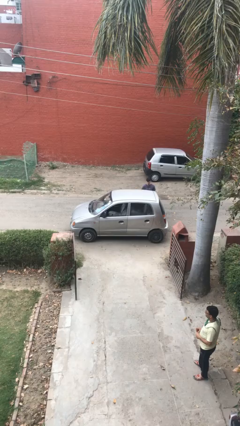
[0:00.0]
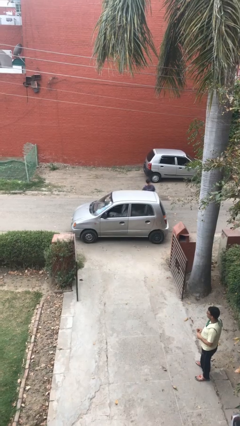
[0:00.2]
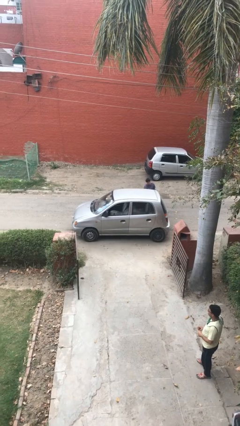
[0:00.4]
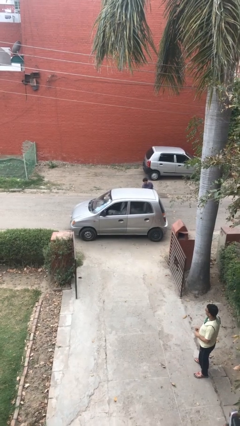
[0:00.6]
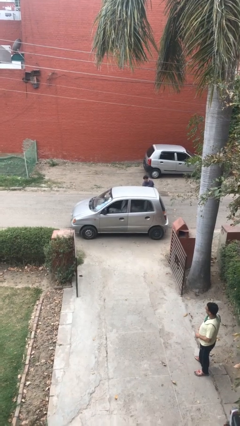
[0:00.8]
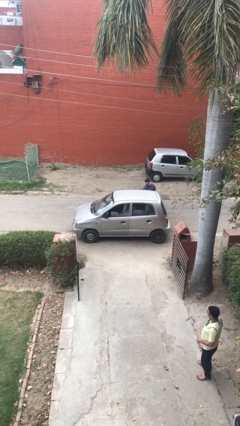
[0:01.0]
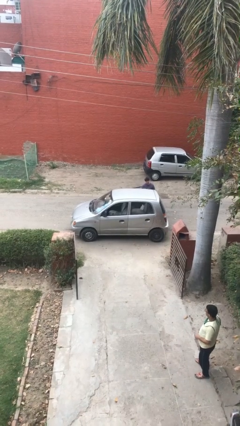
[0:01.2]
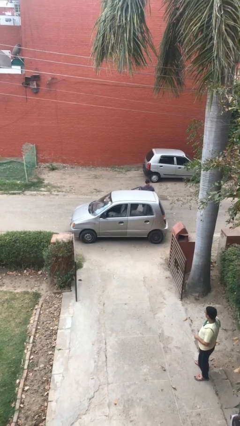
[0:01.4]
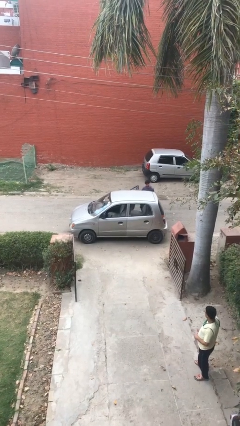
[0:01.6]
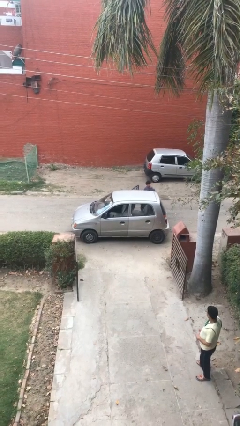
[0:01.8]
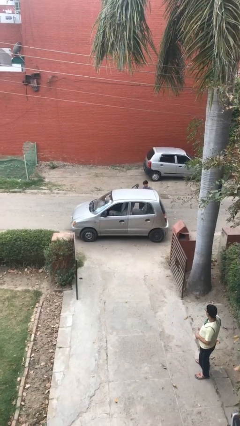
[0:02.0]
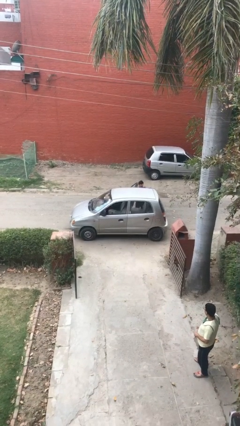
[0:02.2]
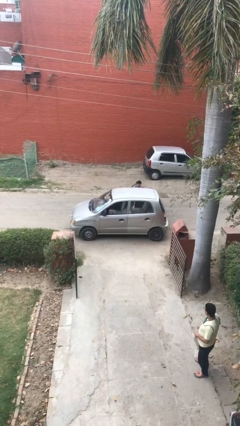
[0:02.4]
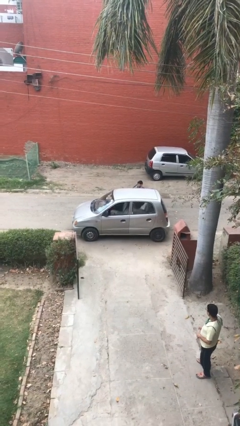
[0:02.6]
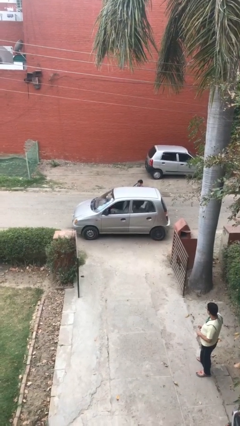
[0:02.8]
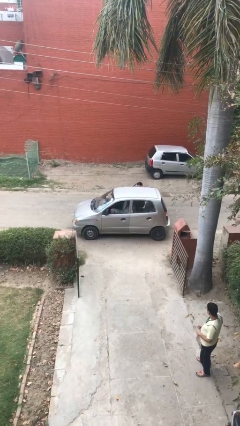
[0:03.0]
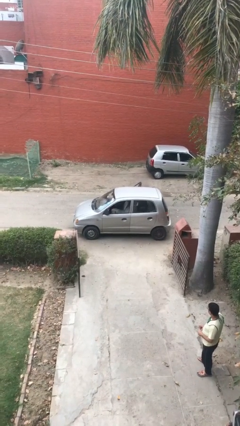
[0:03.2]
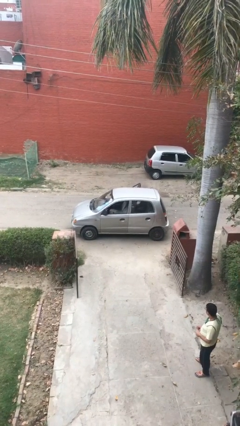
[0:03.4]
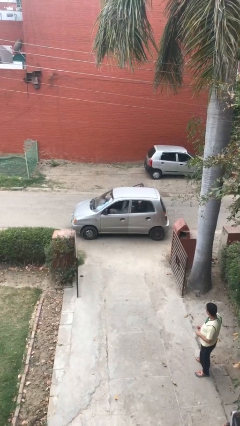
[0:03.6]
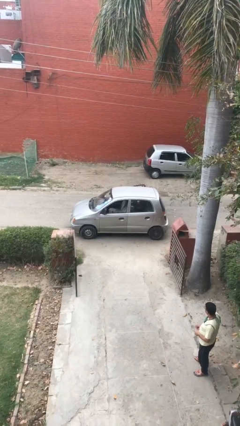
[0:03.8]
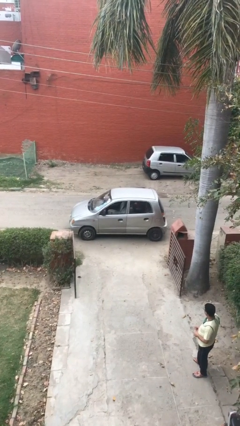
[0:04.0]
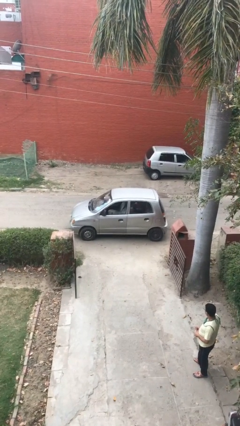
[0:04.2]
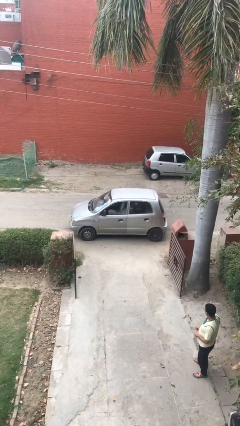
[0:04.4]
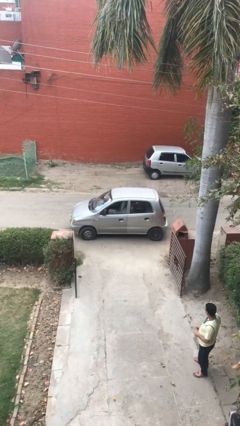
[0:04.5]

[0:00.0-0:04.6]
car picks up person

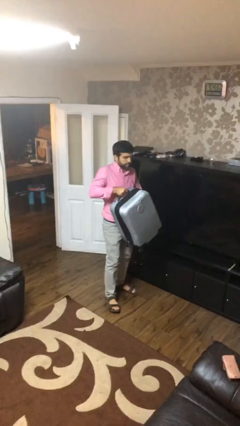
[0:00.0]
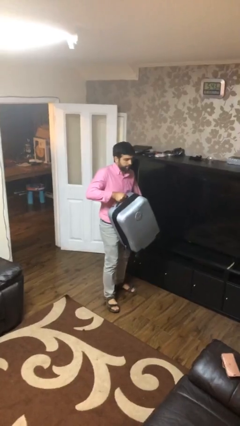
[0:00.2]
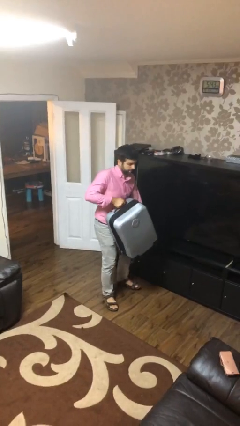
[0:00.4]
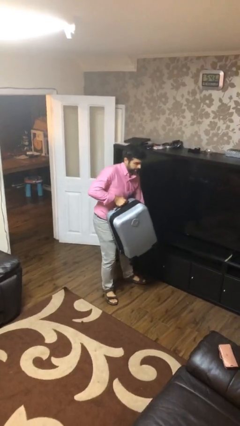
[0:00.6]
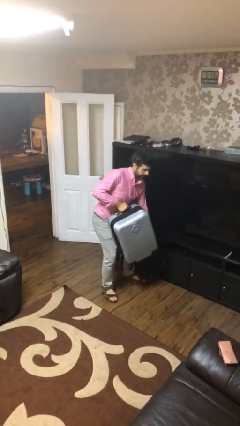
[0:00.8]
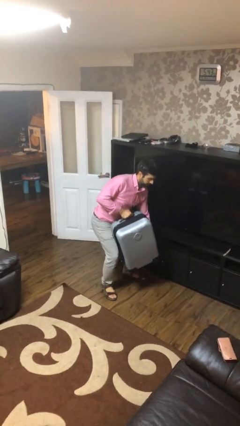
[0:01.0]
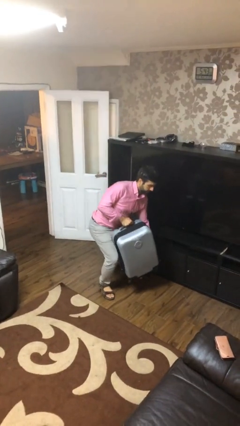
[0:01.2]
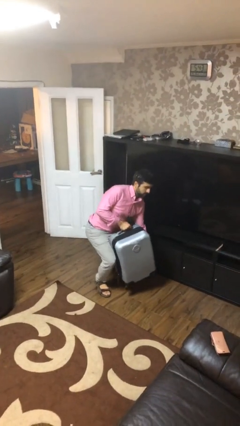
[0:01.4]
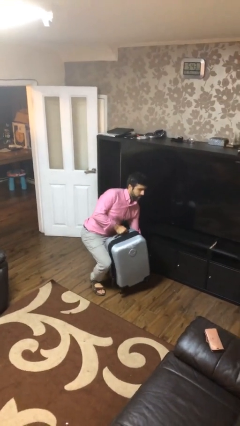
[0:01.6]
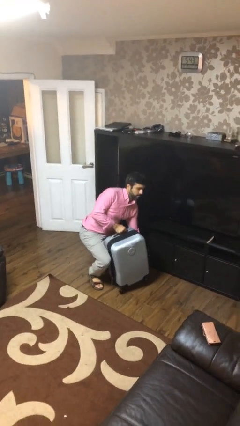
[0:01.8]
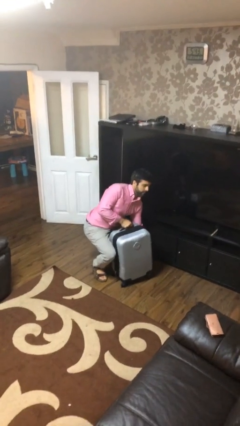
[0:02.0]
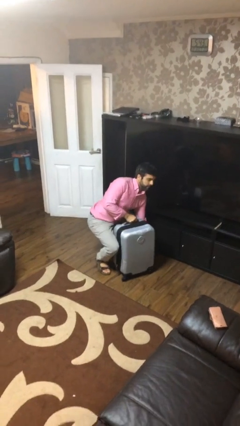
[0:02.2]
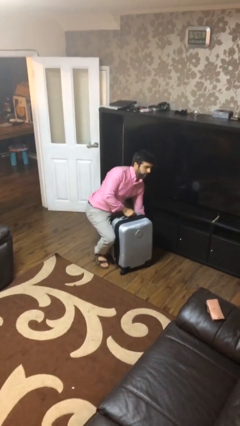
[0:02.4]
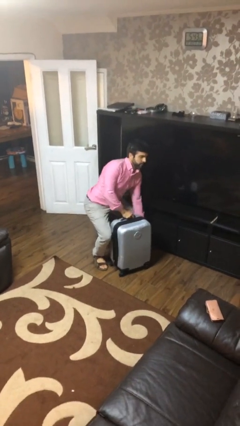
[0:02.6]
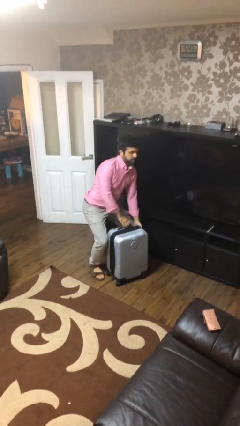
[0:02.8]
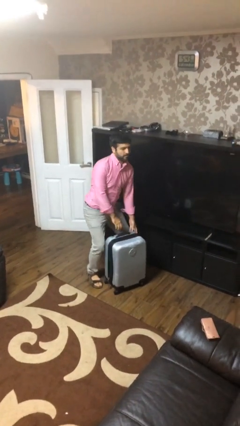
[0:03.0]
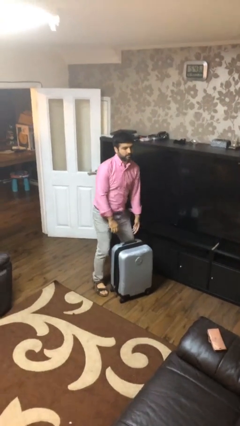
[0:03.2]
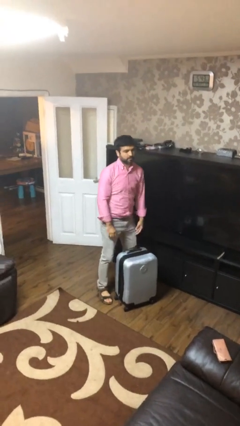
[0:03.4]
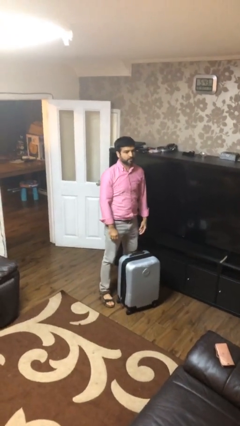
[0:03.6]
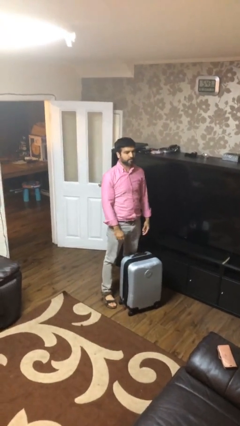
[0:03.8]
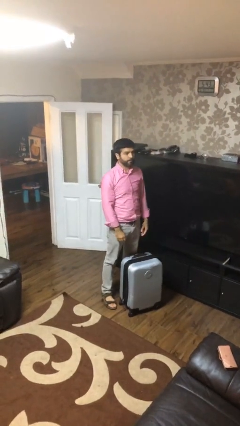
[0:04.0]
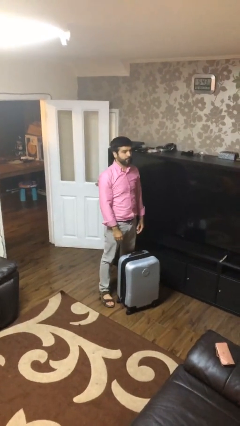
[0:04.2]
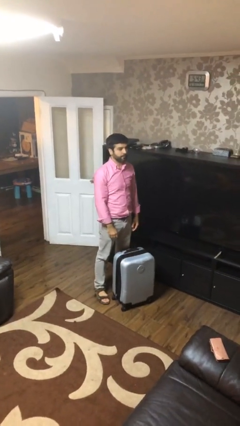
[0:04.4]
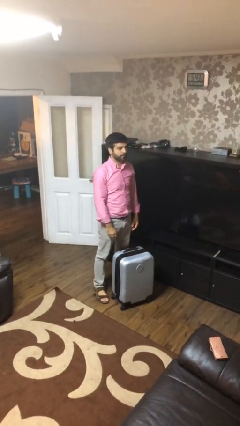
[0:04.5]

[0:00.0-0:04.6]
person puts down object on floor

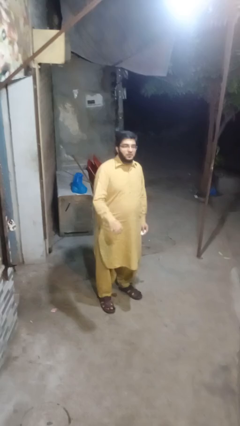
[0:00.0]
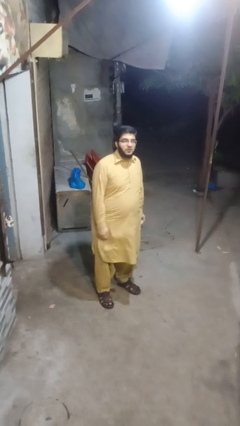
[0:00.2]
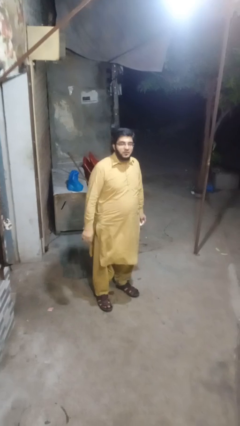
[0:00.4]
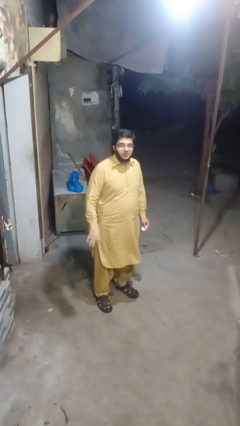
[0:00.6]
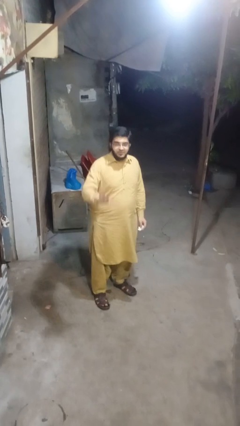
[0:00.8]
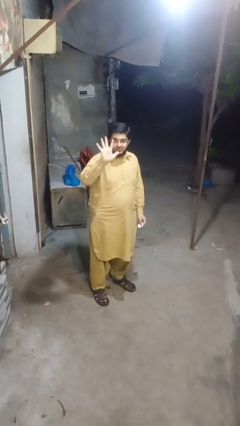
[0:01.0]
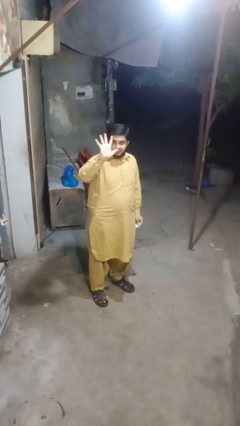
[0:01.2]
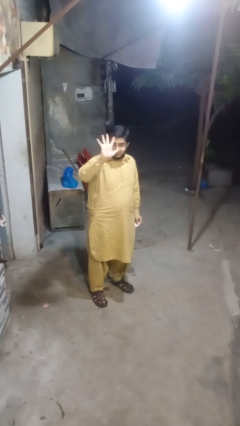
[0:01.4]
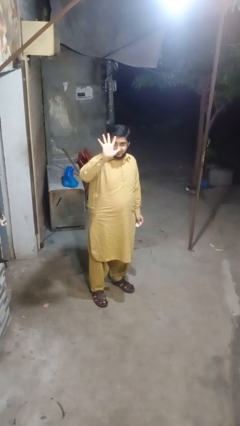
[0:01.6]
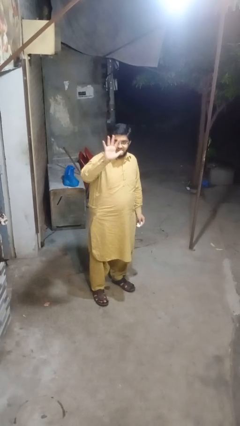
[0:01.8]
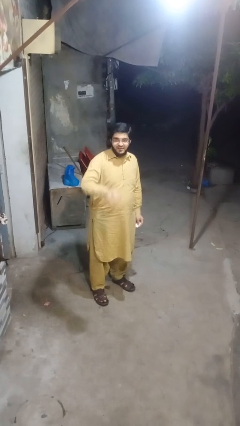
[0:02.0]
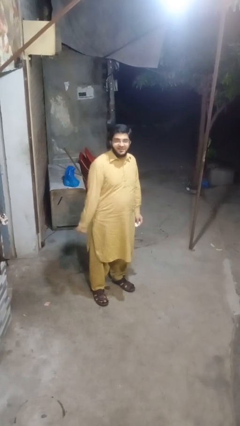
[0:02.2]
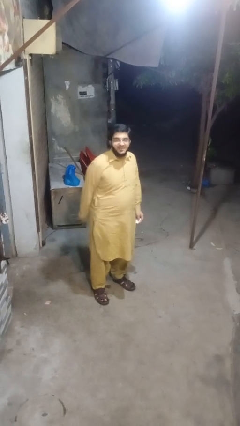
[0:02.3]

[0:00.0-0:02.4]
person gestures number five

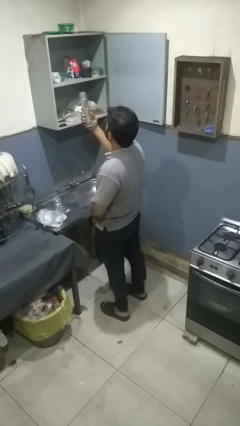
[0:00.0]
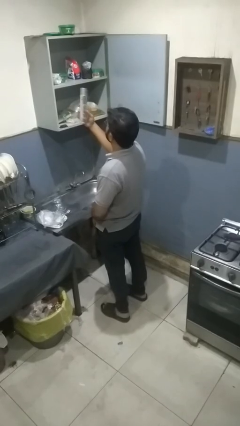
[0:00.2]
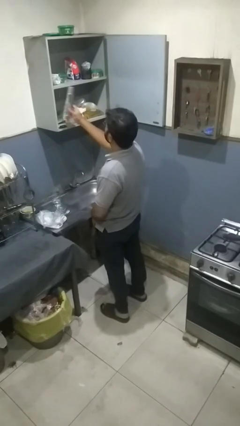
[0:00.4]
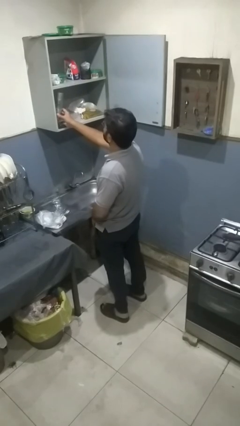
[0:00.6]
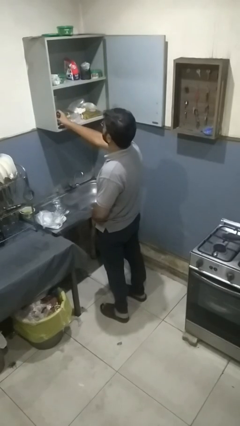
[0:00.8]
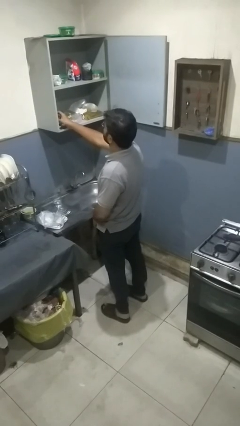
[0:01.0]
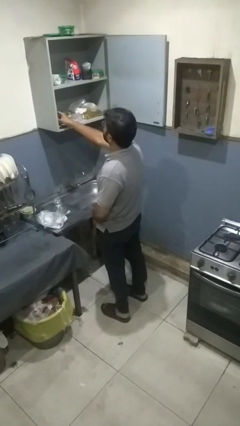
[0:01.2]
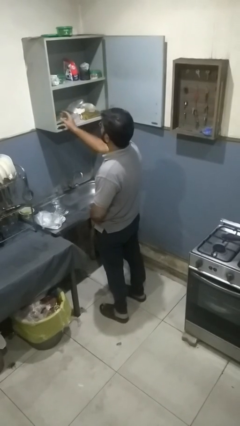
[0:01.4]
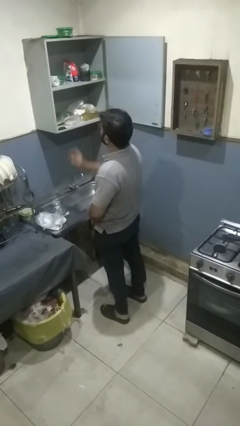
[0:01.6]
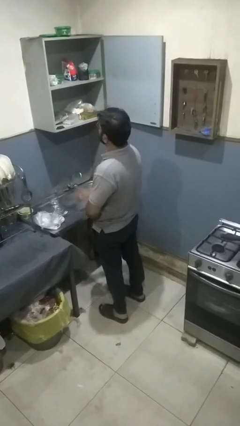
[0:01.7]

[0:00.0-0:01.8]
person puts down object into cabinet

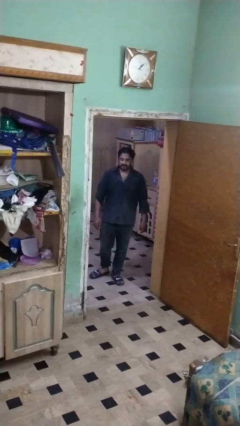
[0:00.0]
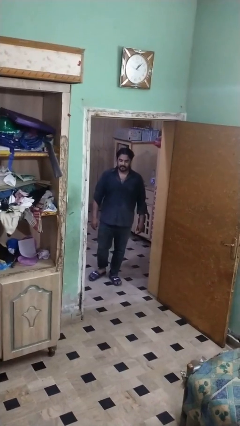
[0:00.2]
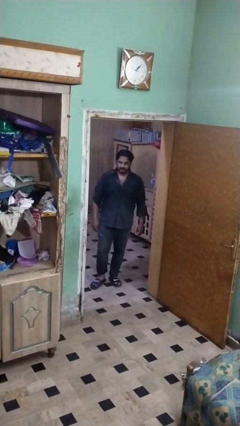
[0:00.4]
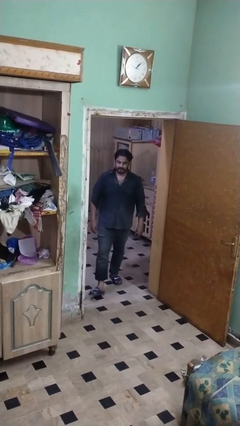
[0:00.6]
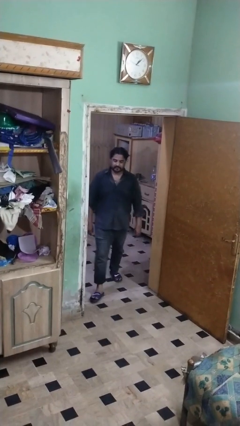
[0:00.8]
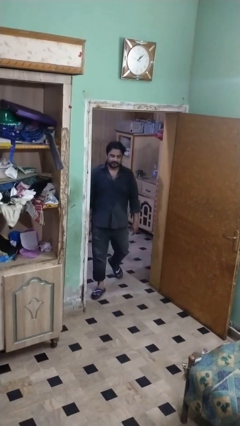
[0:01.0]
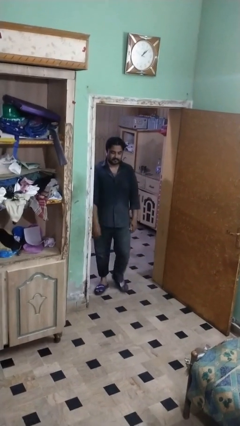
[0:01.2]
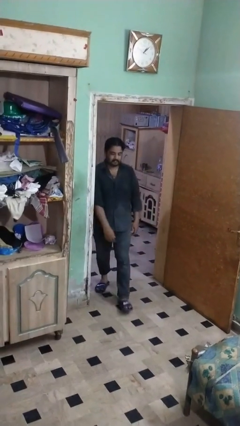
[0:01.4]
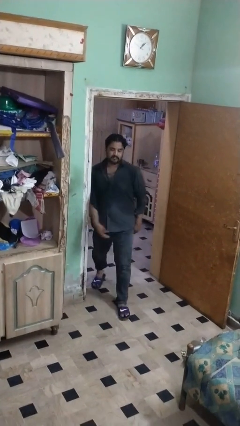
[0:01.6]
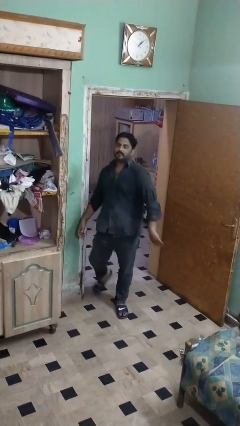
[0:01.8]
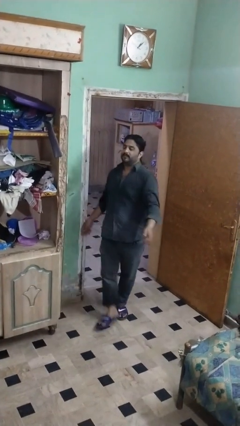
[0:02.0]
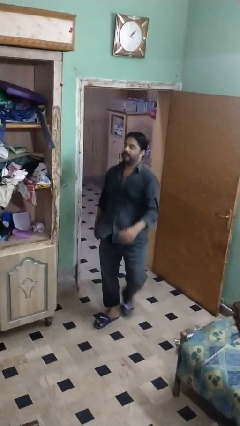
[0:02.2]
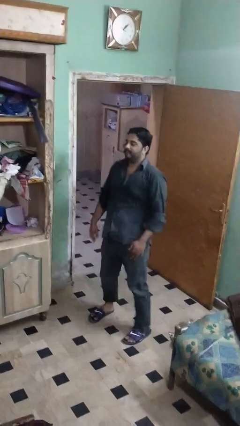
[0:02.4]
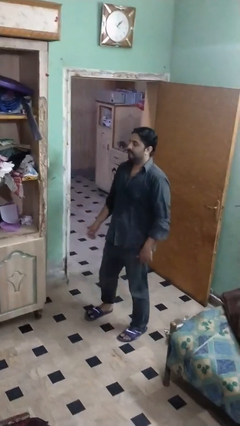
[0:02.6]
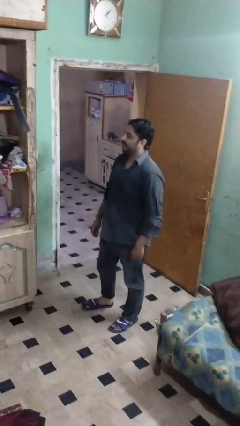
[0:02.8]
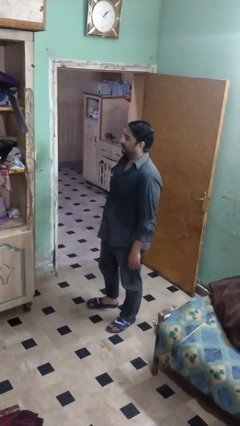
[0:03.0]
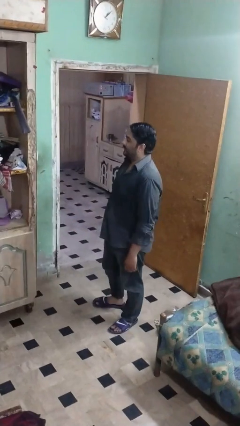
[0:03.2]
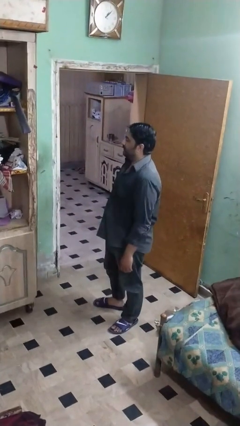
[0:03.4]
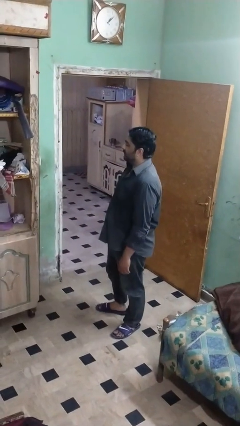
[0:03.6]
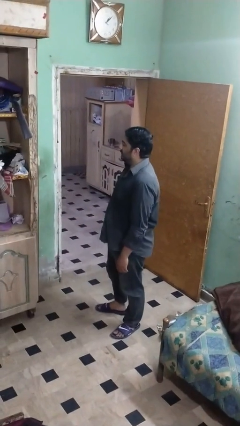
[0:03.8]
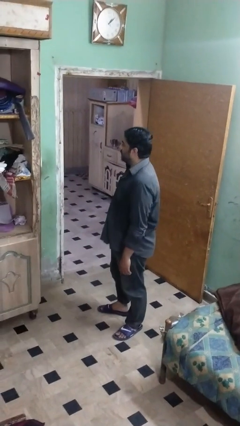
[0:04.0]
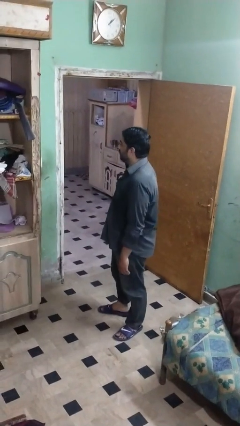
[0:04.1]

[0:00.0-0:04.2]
person bumps into wall
